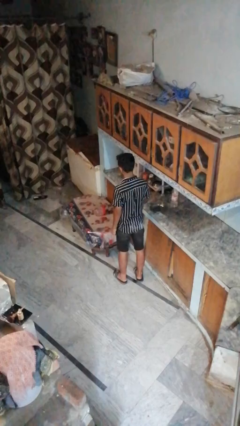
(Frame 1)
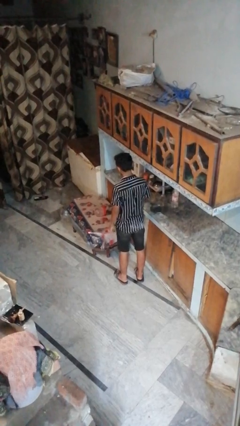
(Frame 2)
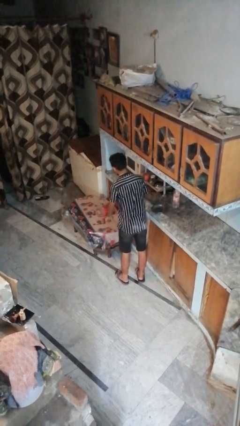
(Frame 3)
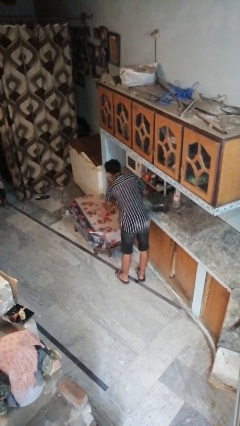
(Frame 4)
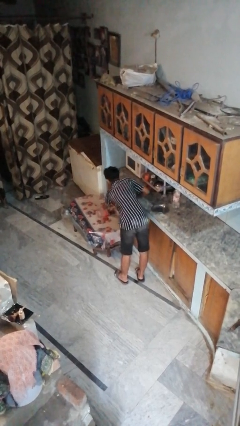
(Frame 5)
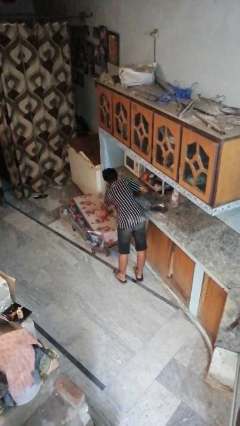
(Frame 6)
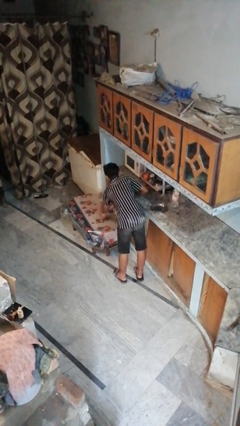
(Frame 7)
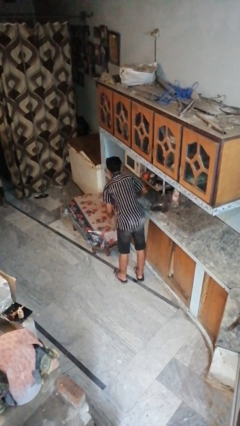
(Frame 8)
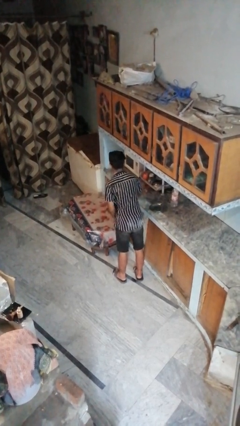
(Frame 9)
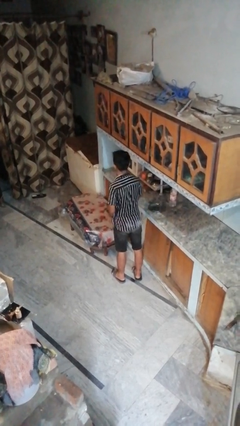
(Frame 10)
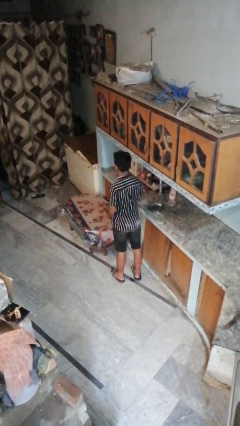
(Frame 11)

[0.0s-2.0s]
person picks up object from table

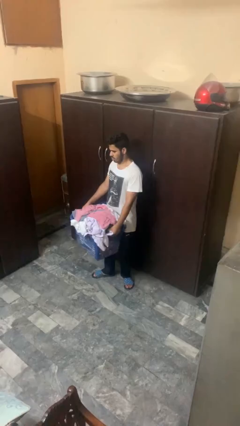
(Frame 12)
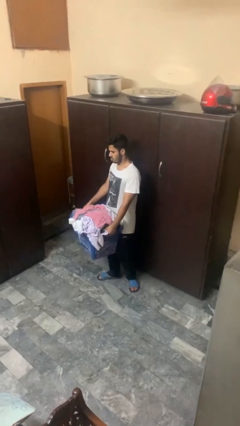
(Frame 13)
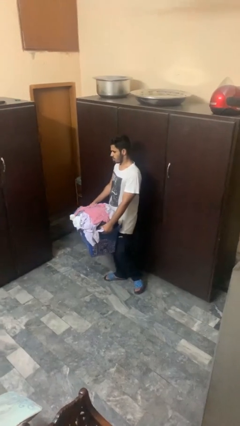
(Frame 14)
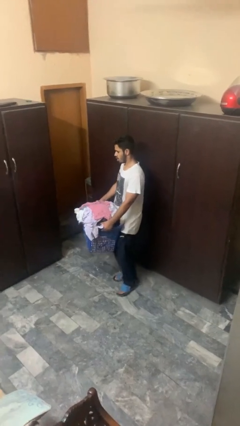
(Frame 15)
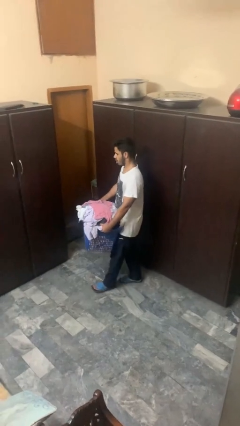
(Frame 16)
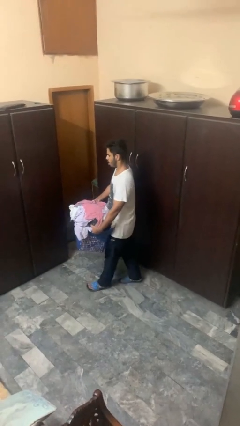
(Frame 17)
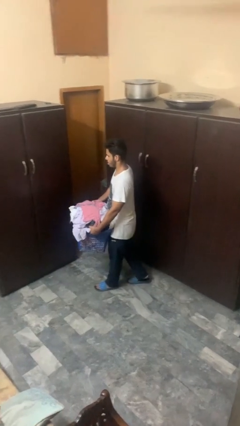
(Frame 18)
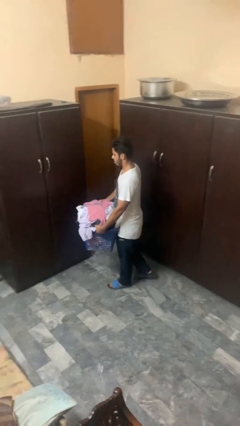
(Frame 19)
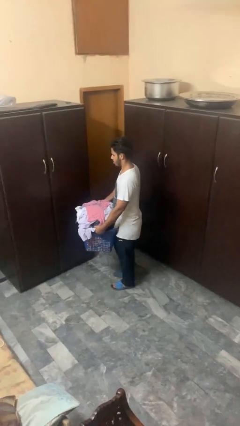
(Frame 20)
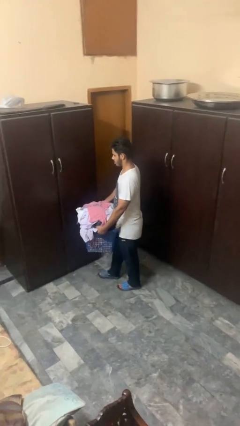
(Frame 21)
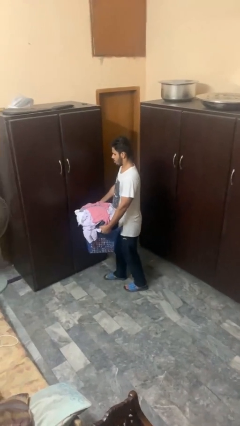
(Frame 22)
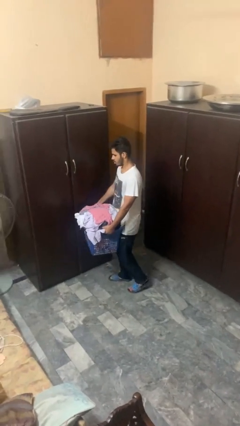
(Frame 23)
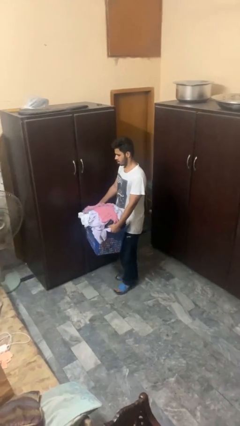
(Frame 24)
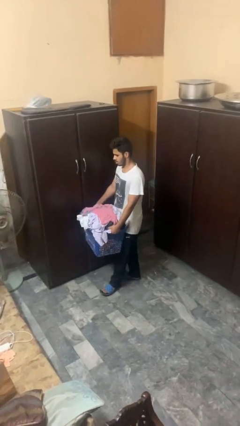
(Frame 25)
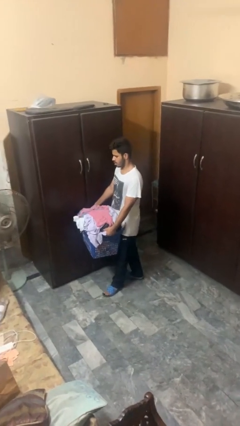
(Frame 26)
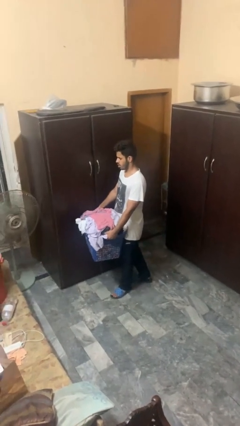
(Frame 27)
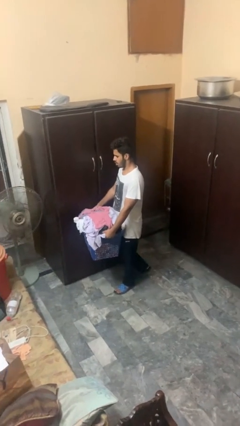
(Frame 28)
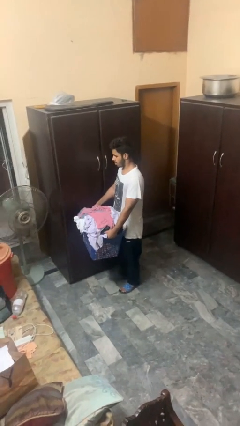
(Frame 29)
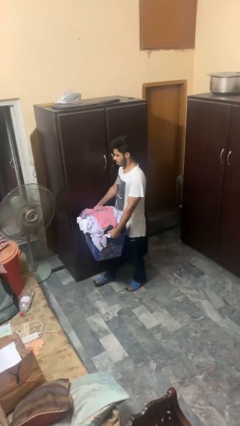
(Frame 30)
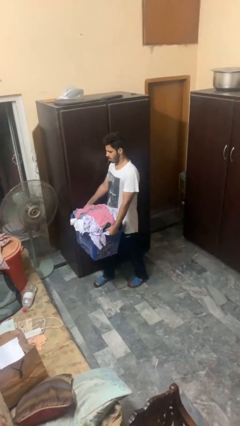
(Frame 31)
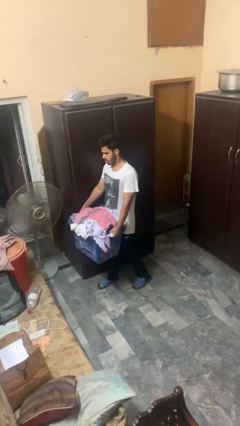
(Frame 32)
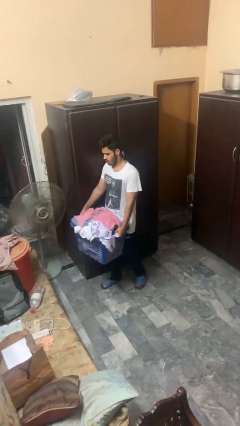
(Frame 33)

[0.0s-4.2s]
person carries laundry basket

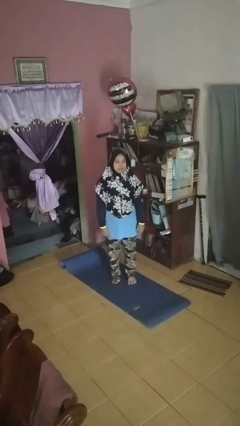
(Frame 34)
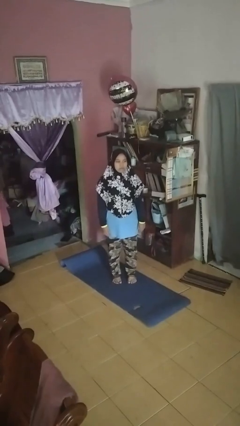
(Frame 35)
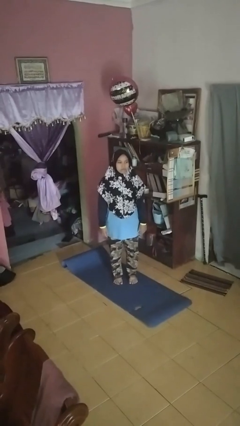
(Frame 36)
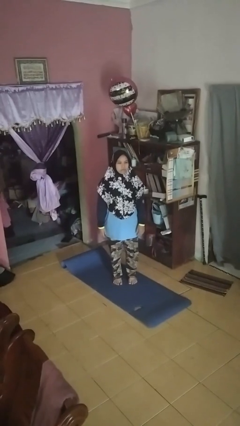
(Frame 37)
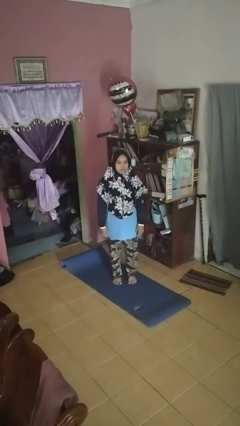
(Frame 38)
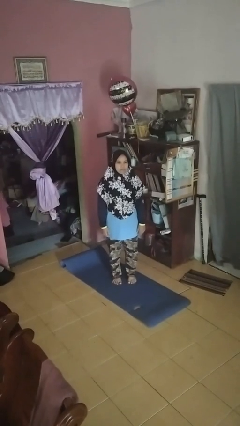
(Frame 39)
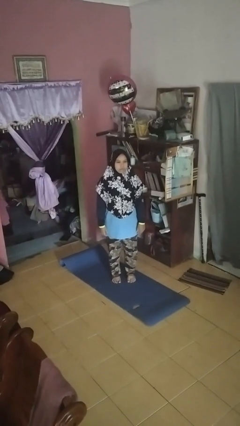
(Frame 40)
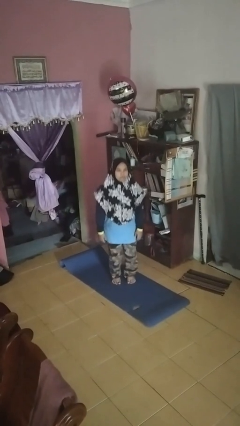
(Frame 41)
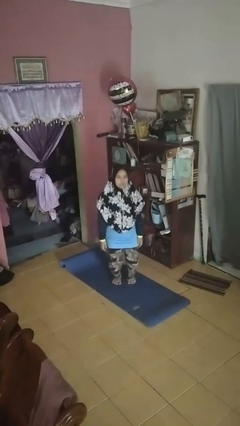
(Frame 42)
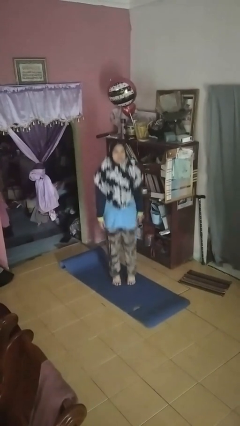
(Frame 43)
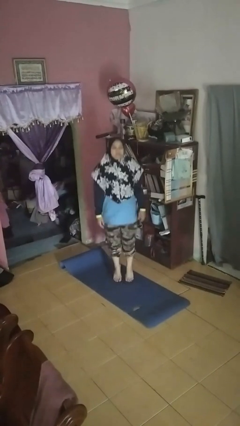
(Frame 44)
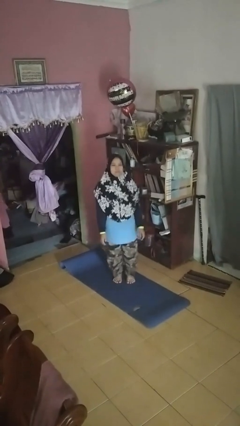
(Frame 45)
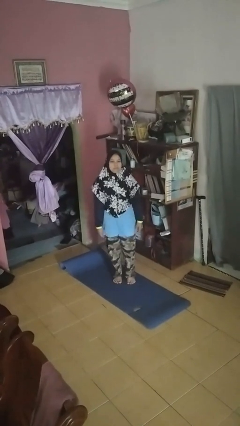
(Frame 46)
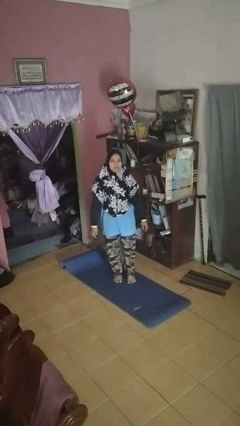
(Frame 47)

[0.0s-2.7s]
person jumps

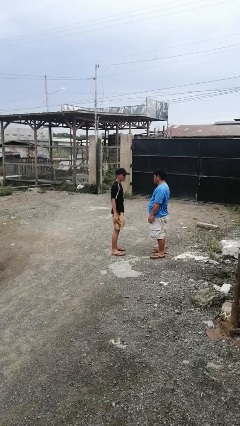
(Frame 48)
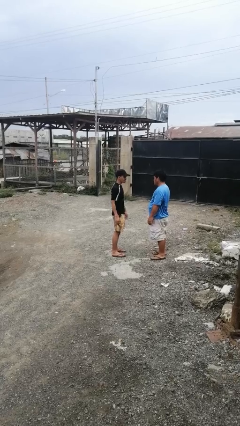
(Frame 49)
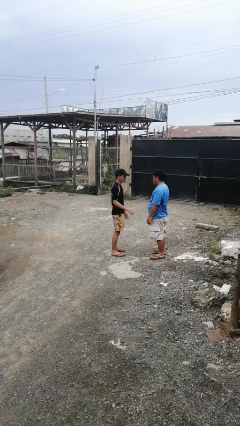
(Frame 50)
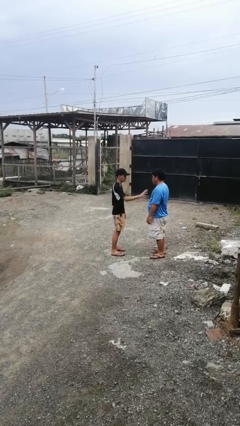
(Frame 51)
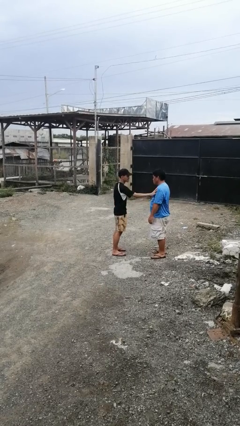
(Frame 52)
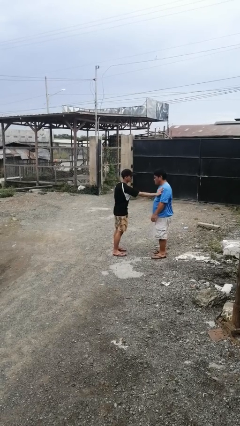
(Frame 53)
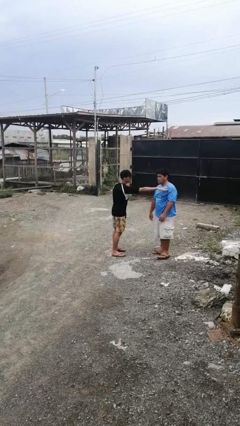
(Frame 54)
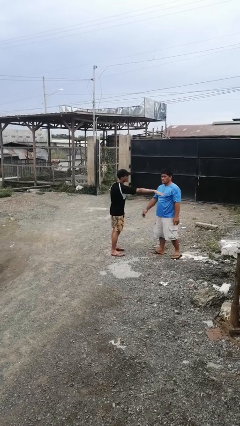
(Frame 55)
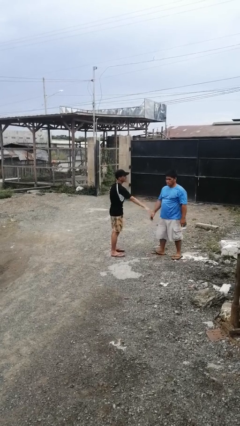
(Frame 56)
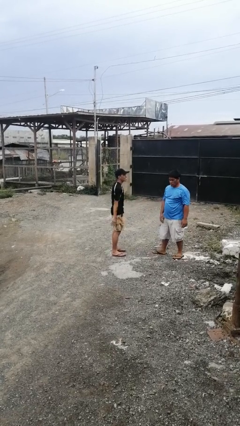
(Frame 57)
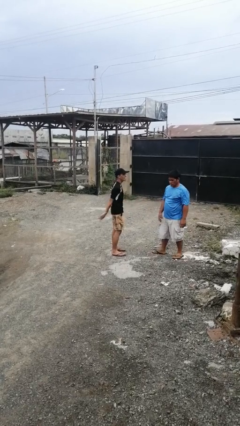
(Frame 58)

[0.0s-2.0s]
person shoves person

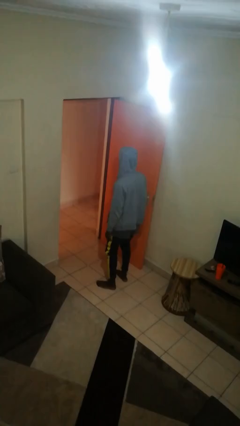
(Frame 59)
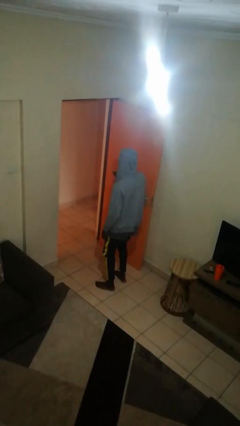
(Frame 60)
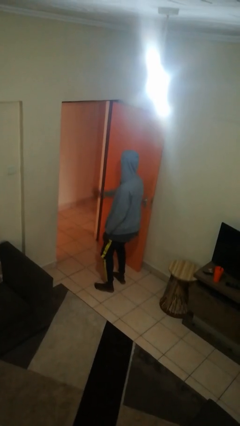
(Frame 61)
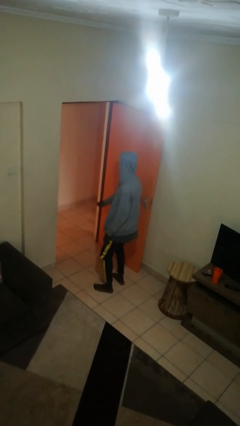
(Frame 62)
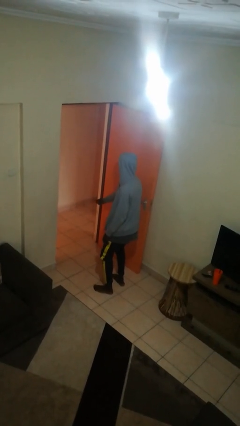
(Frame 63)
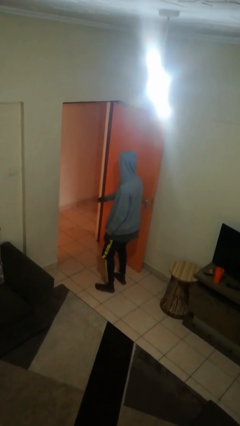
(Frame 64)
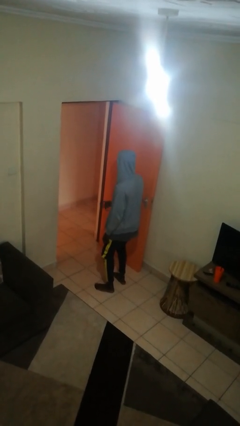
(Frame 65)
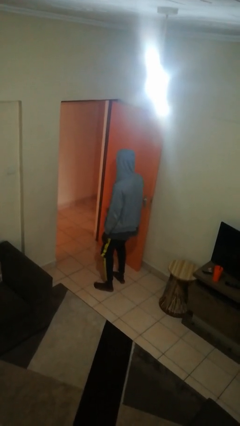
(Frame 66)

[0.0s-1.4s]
person karate chop

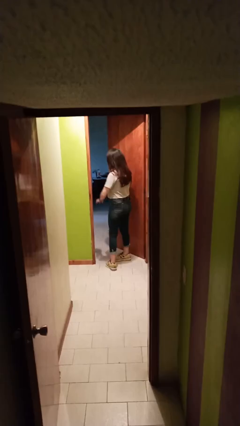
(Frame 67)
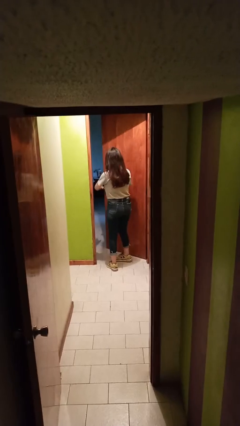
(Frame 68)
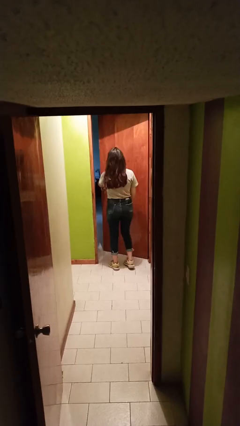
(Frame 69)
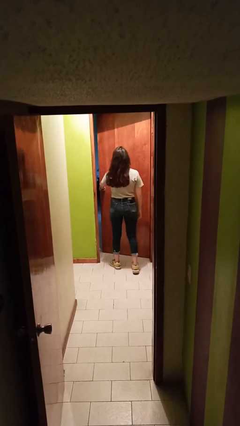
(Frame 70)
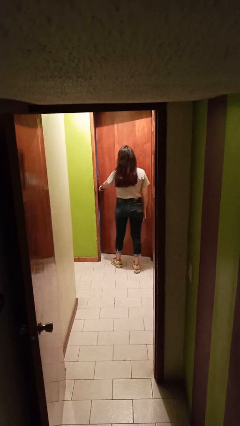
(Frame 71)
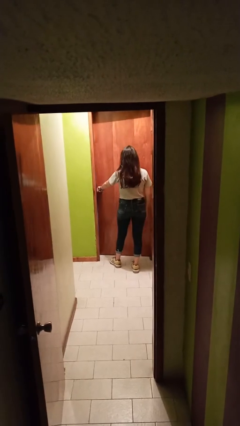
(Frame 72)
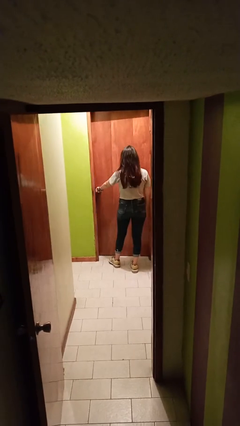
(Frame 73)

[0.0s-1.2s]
person closes facility door

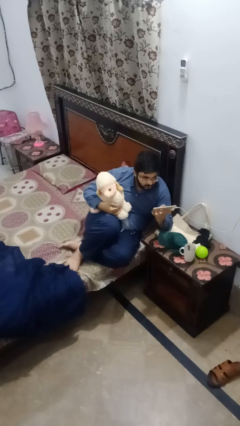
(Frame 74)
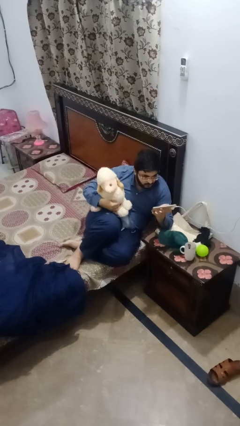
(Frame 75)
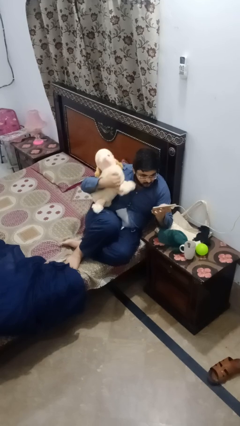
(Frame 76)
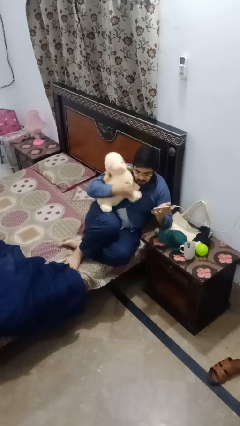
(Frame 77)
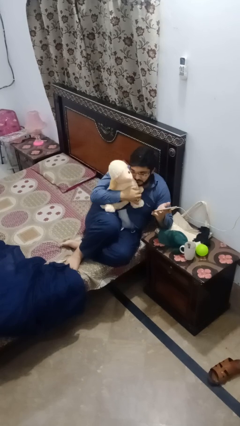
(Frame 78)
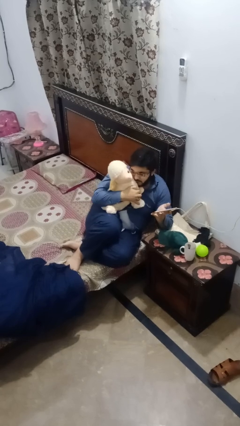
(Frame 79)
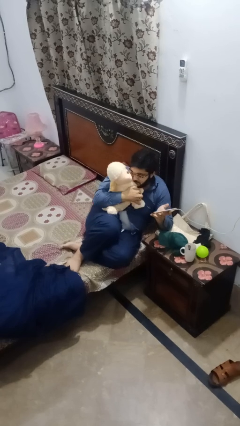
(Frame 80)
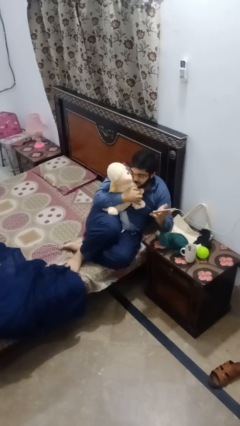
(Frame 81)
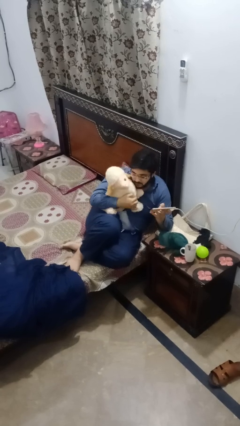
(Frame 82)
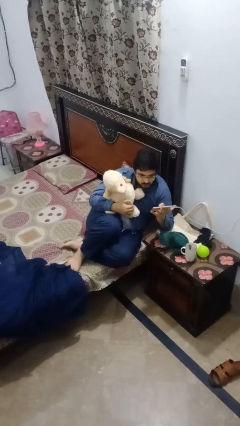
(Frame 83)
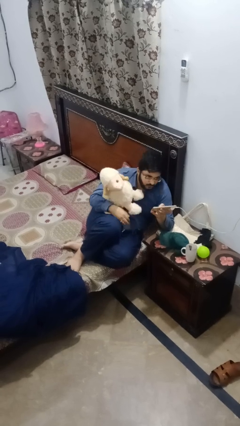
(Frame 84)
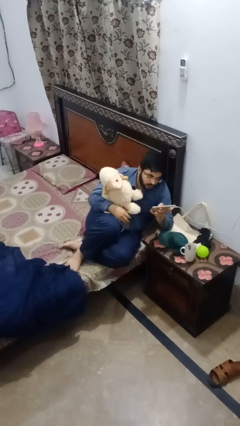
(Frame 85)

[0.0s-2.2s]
person hugs stuffed animal

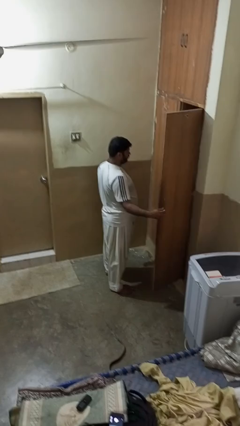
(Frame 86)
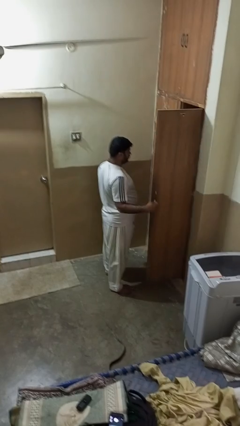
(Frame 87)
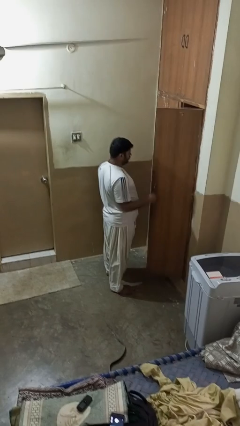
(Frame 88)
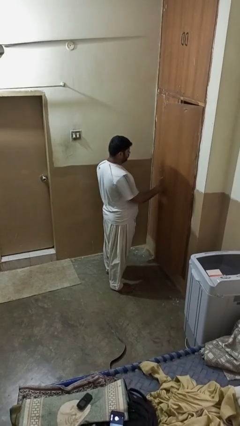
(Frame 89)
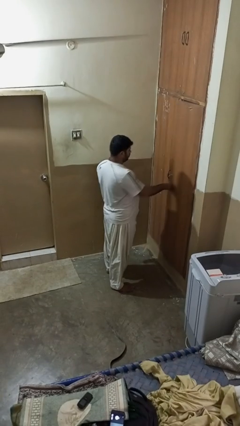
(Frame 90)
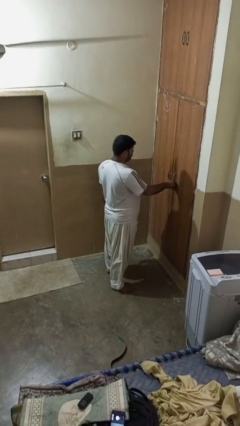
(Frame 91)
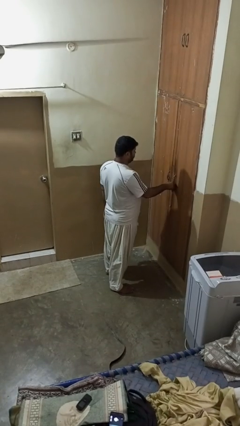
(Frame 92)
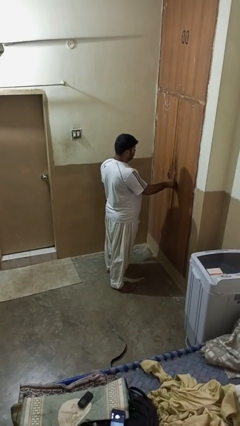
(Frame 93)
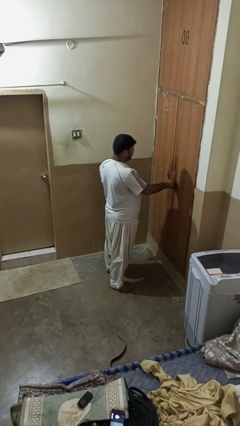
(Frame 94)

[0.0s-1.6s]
person closes closet door
